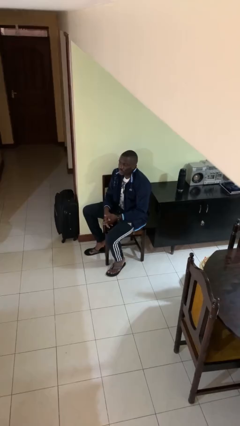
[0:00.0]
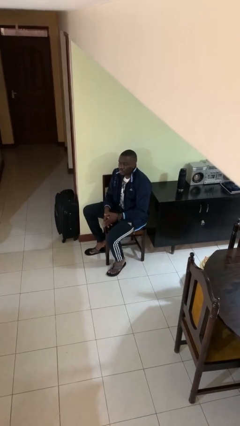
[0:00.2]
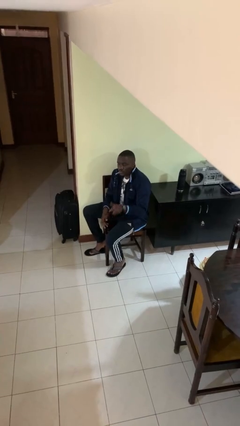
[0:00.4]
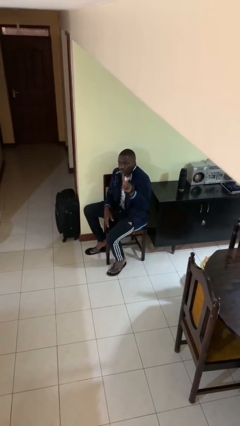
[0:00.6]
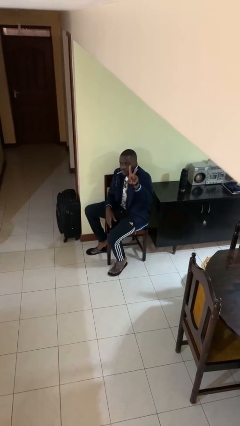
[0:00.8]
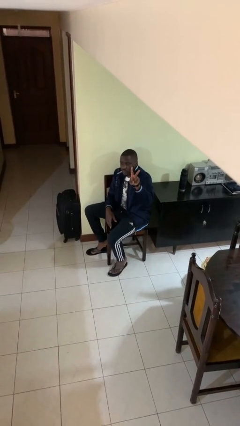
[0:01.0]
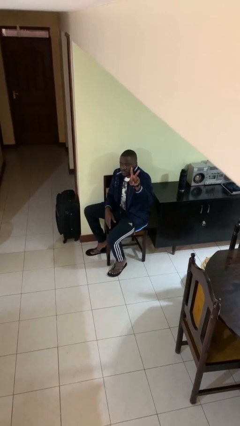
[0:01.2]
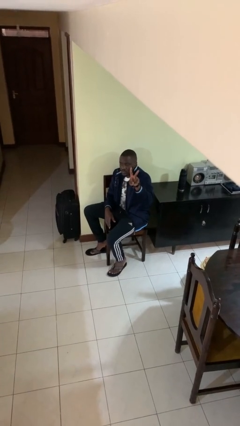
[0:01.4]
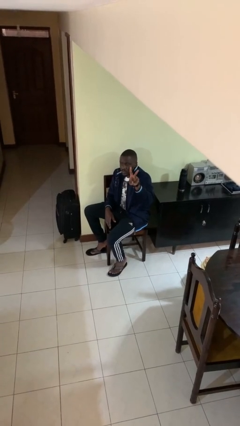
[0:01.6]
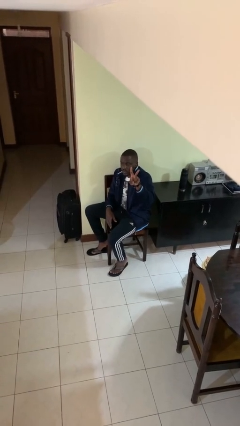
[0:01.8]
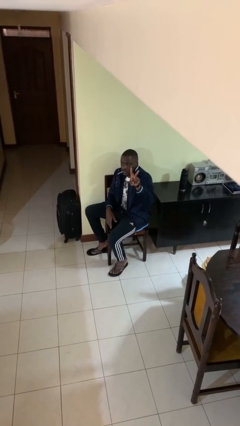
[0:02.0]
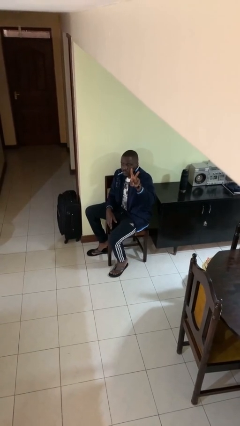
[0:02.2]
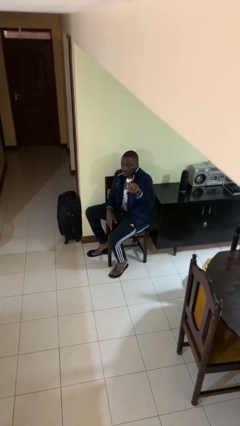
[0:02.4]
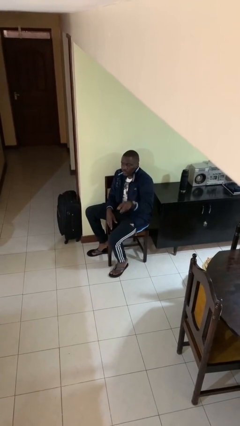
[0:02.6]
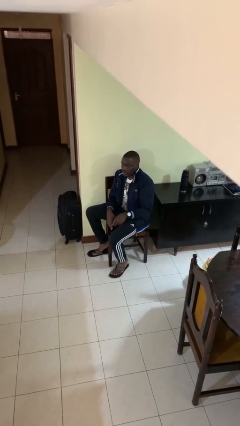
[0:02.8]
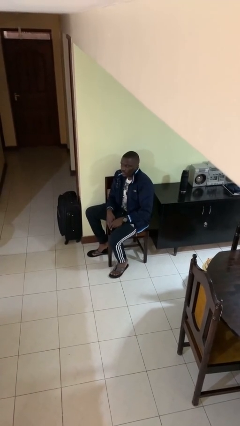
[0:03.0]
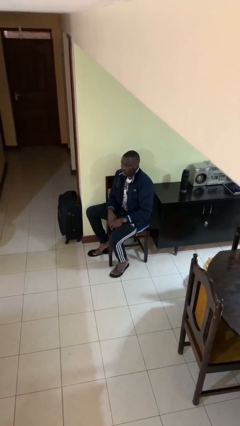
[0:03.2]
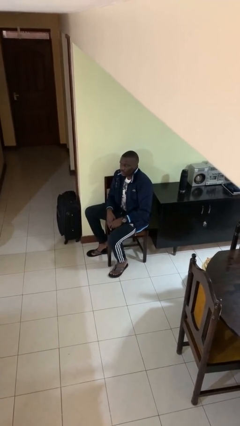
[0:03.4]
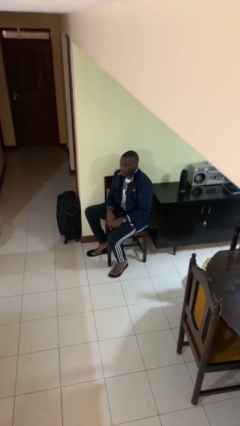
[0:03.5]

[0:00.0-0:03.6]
person gestures peace

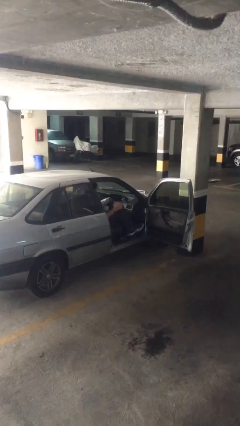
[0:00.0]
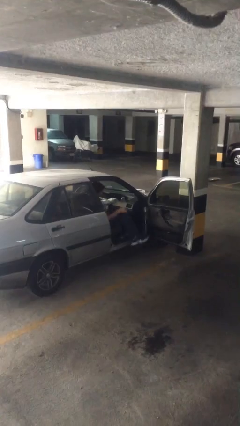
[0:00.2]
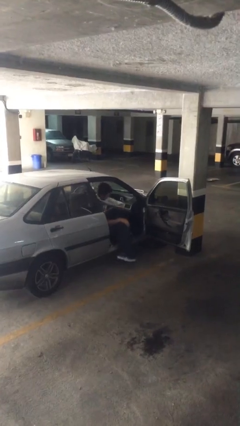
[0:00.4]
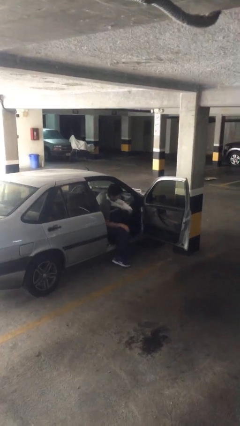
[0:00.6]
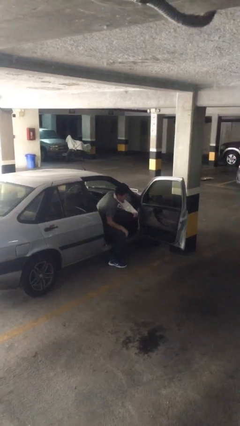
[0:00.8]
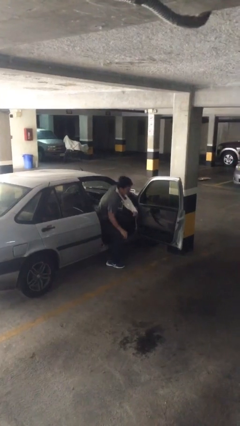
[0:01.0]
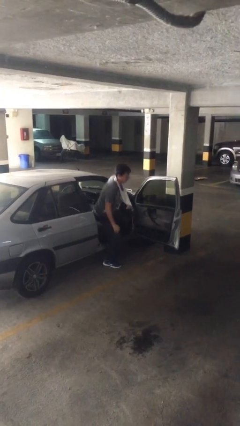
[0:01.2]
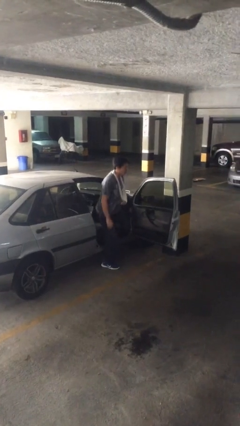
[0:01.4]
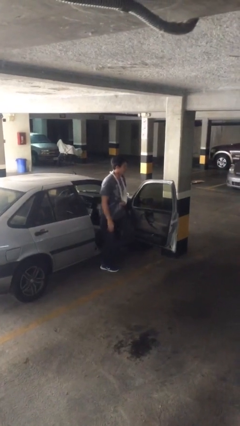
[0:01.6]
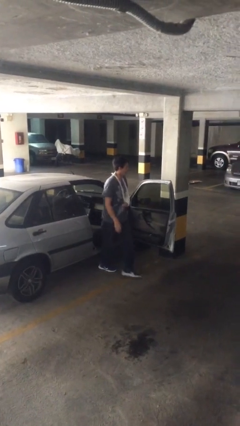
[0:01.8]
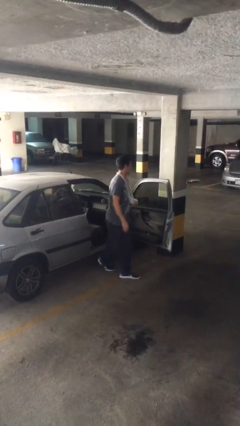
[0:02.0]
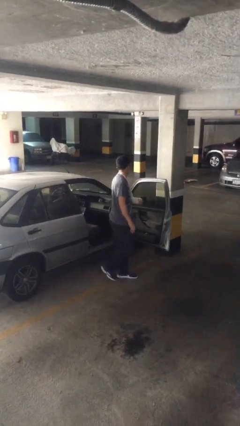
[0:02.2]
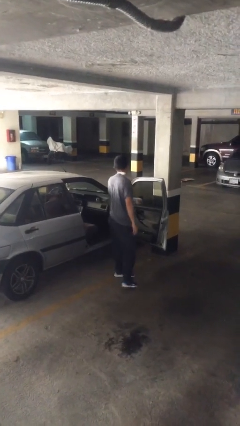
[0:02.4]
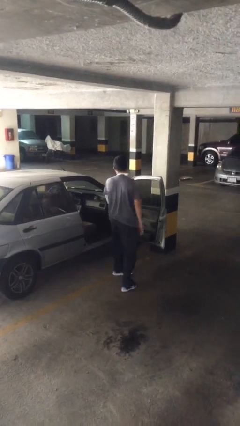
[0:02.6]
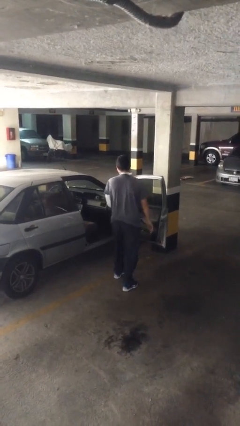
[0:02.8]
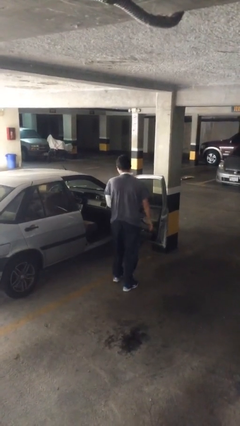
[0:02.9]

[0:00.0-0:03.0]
person exits car

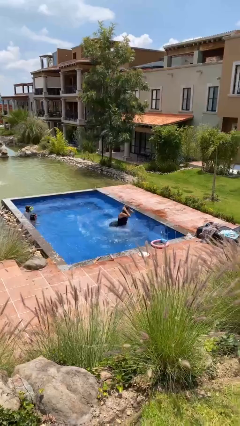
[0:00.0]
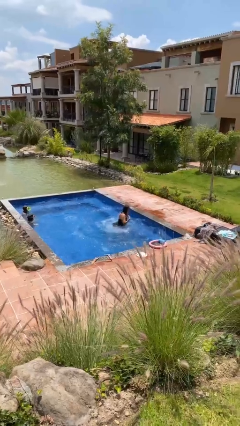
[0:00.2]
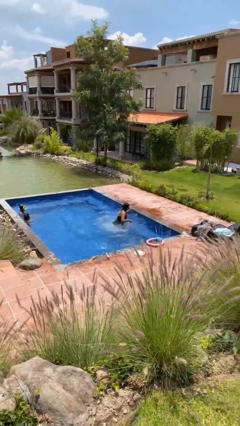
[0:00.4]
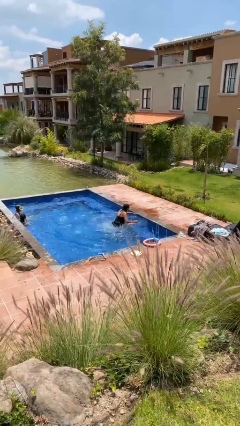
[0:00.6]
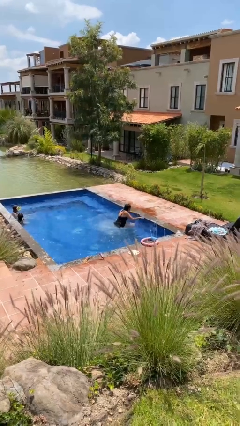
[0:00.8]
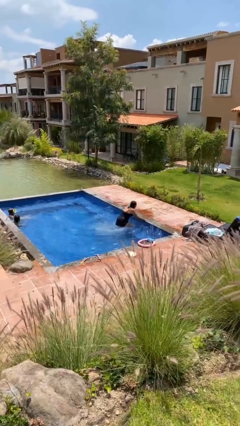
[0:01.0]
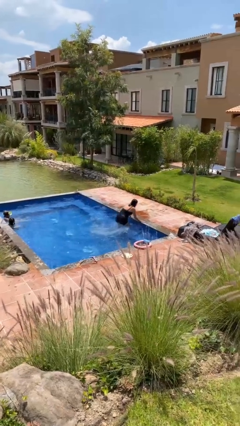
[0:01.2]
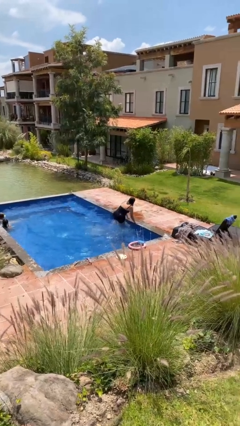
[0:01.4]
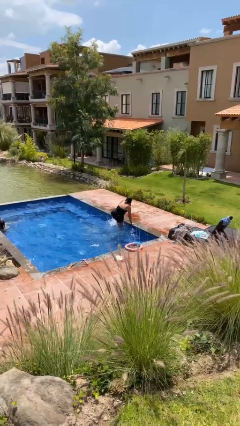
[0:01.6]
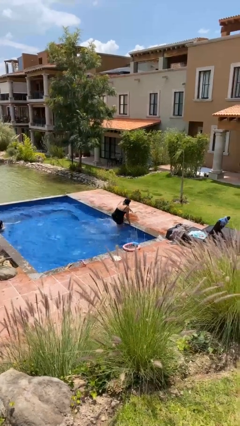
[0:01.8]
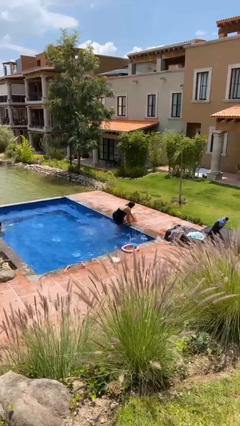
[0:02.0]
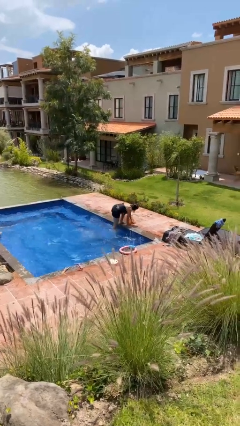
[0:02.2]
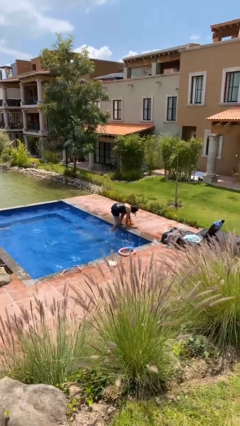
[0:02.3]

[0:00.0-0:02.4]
person exits pool

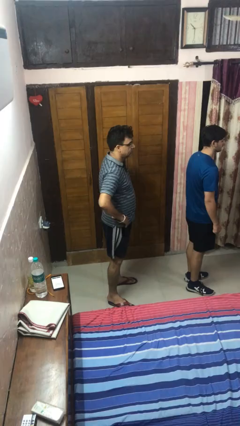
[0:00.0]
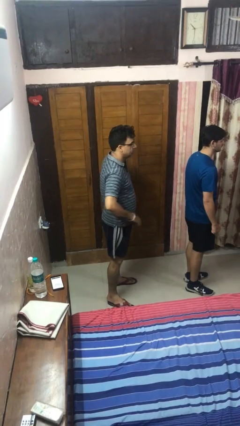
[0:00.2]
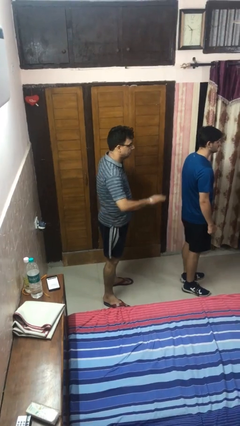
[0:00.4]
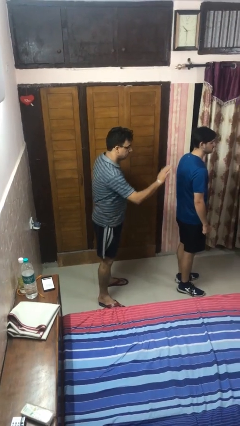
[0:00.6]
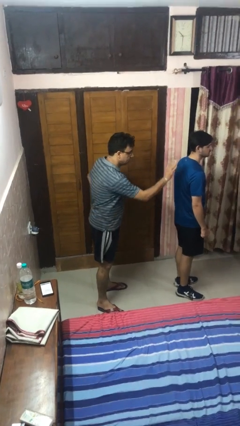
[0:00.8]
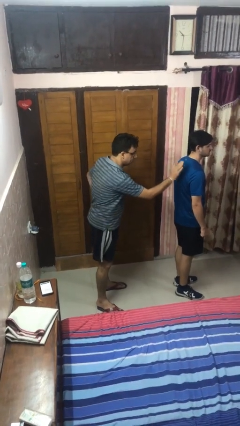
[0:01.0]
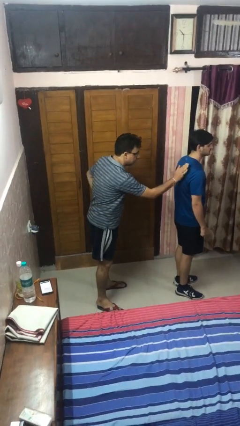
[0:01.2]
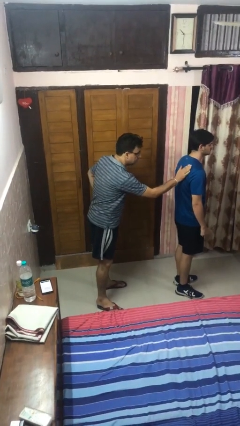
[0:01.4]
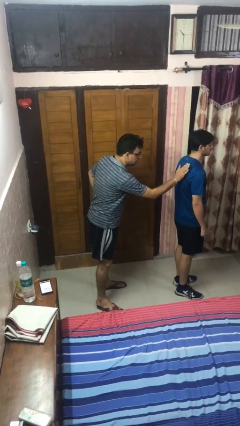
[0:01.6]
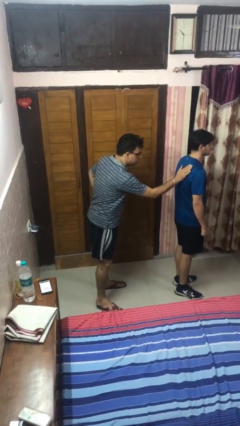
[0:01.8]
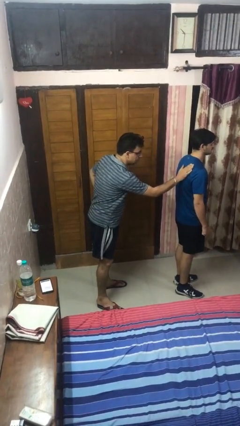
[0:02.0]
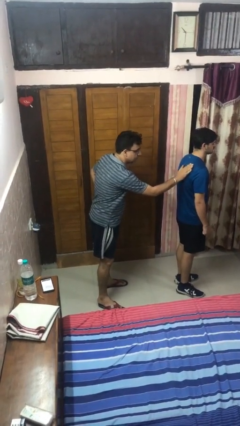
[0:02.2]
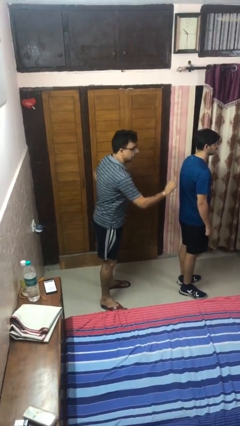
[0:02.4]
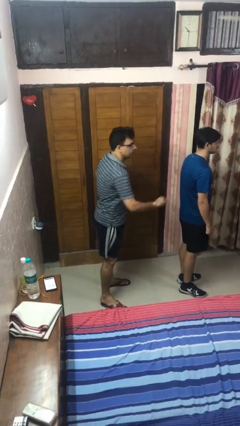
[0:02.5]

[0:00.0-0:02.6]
person touches back of person

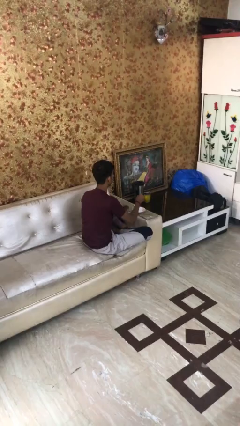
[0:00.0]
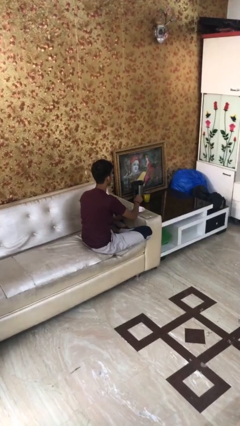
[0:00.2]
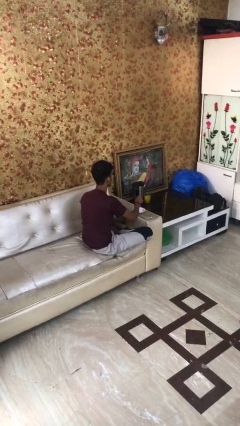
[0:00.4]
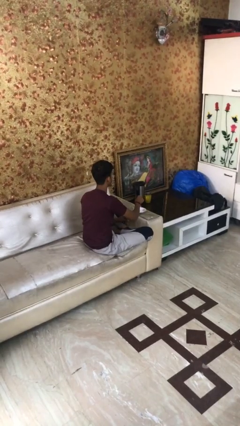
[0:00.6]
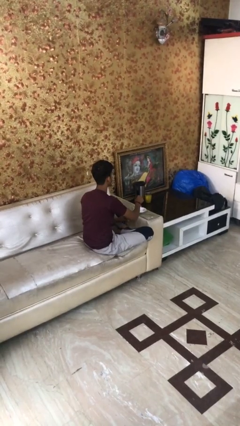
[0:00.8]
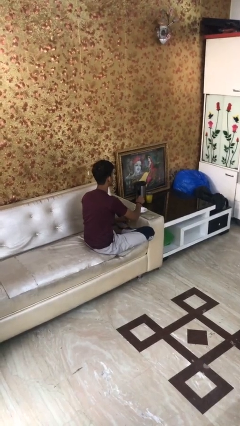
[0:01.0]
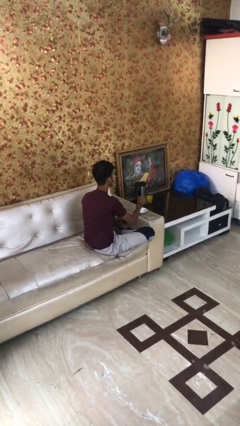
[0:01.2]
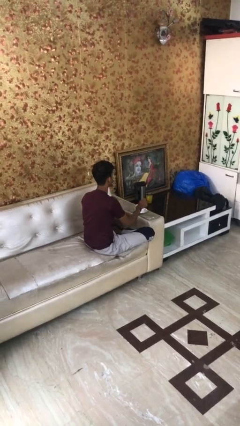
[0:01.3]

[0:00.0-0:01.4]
person stirs mug

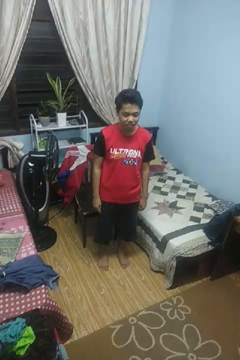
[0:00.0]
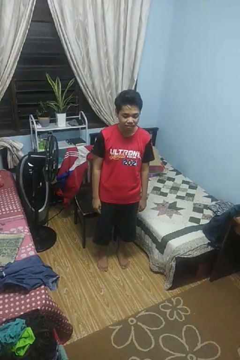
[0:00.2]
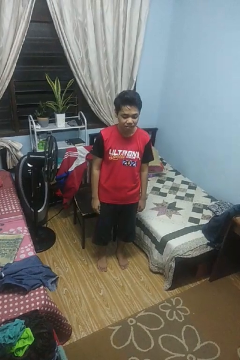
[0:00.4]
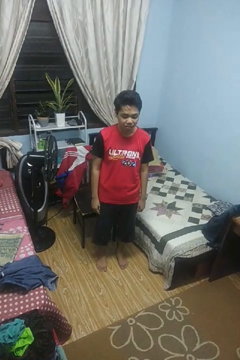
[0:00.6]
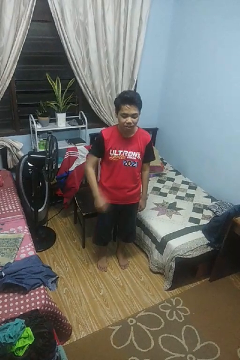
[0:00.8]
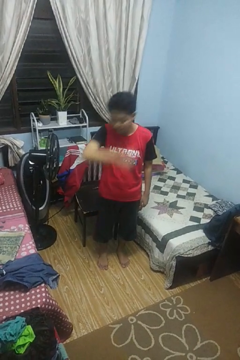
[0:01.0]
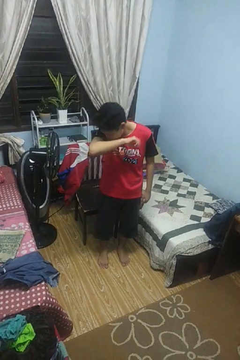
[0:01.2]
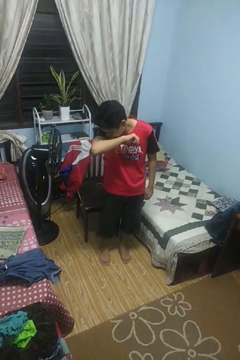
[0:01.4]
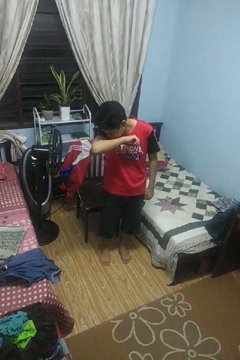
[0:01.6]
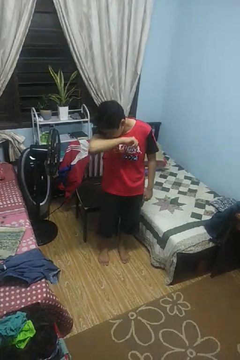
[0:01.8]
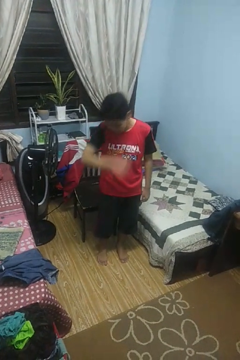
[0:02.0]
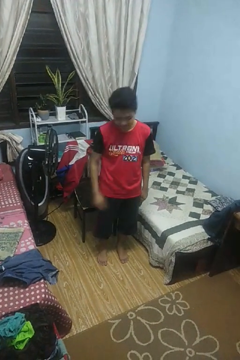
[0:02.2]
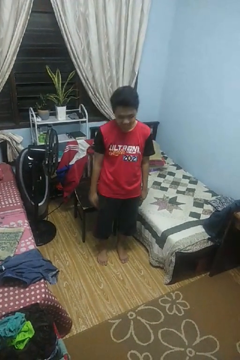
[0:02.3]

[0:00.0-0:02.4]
person sneezes into arm

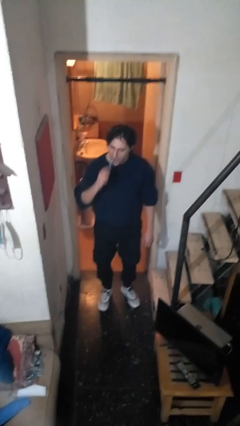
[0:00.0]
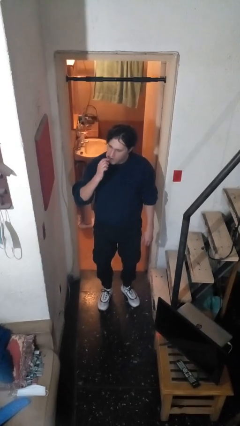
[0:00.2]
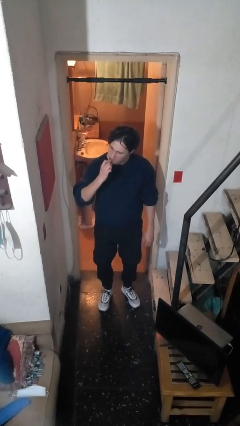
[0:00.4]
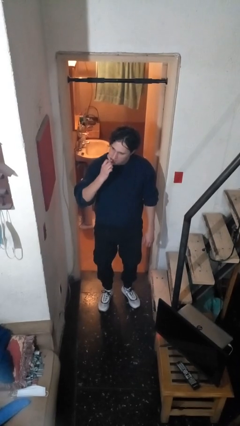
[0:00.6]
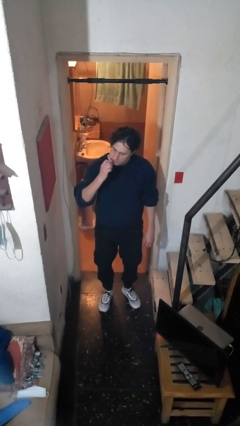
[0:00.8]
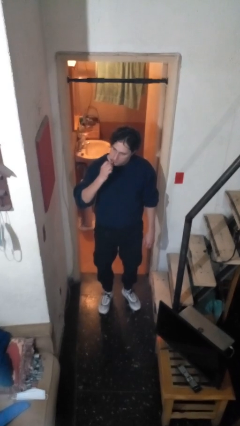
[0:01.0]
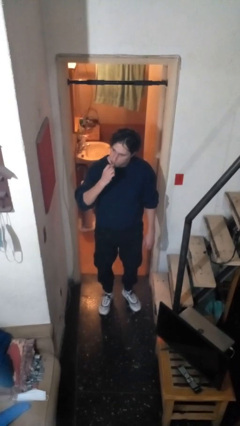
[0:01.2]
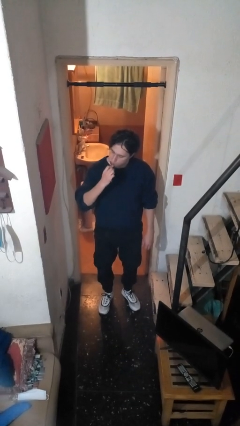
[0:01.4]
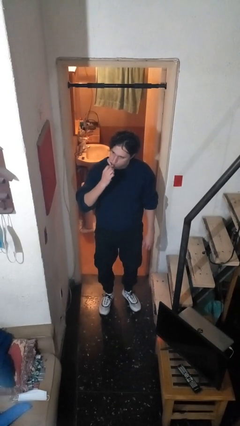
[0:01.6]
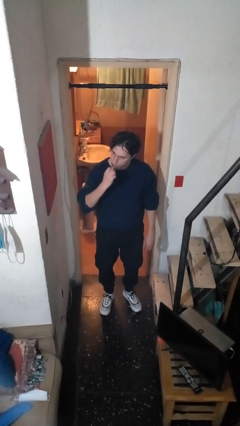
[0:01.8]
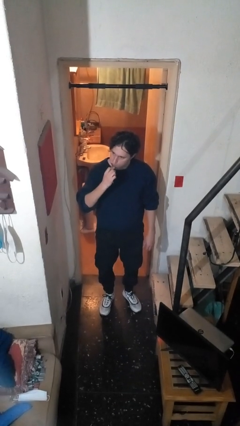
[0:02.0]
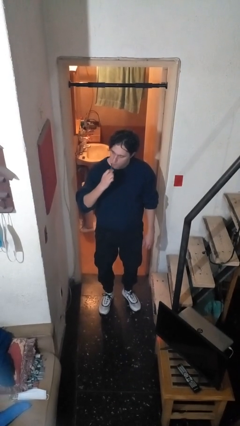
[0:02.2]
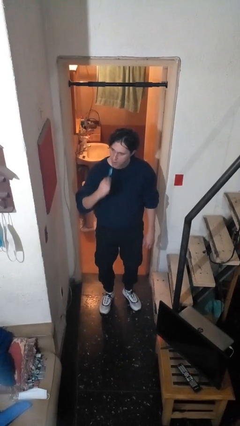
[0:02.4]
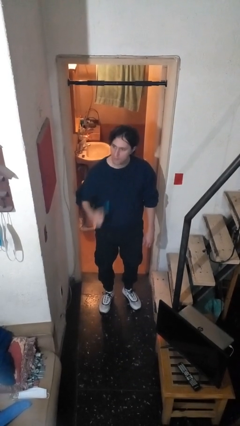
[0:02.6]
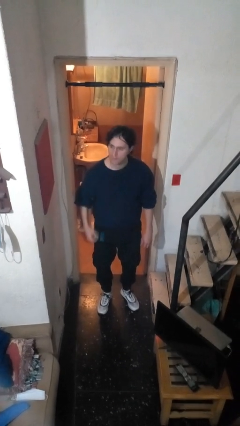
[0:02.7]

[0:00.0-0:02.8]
person brushes teeth
